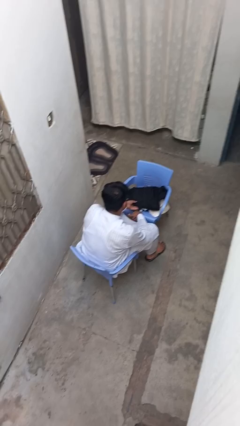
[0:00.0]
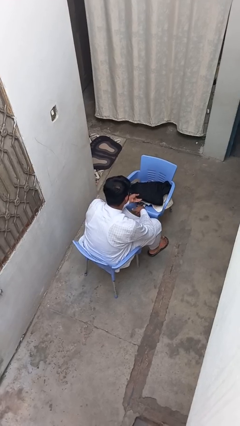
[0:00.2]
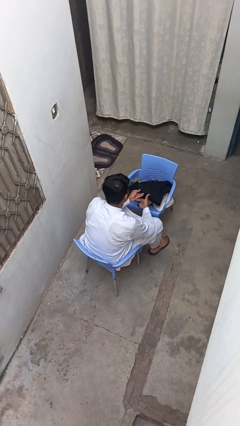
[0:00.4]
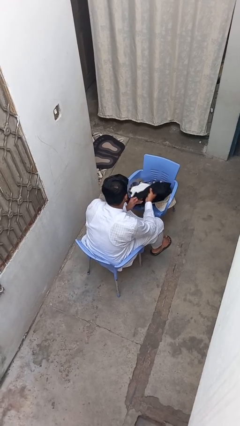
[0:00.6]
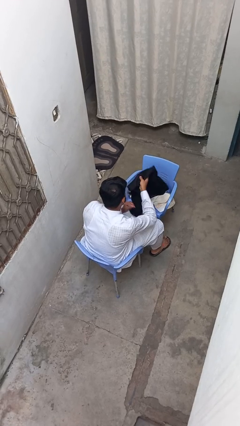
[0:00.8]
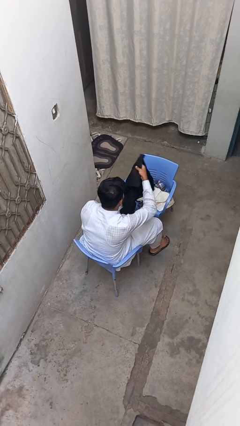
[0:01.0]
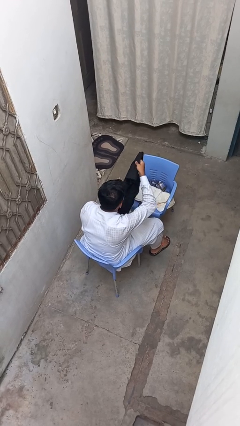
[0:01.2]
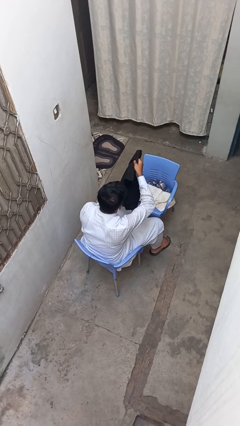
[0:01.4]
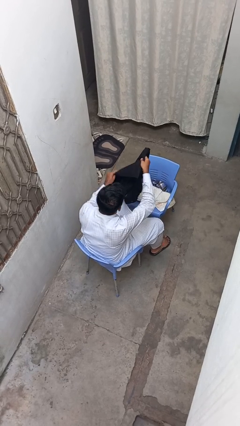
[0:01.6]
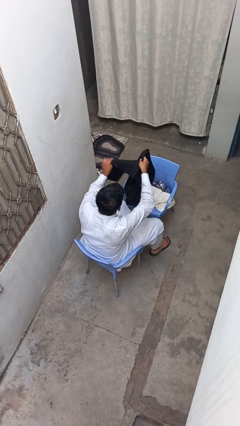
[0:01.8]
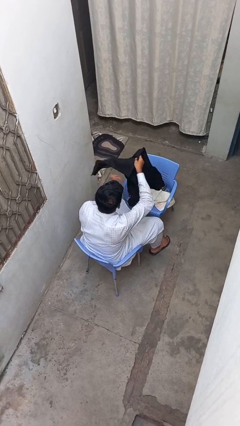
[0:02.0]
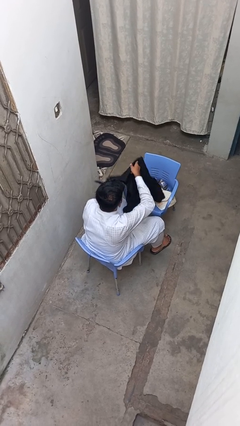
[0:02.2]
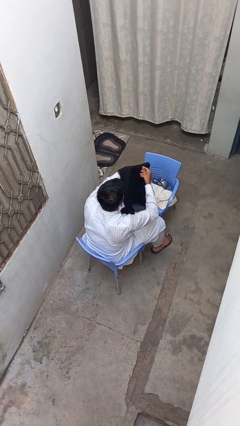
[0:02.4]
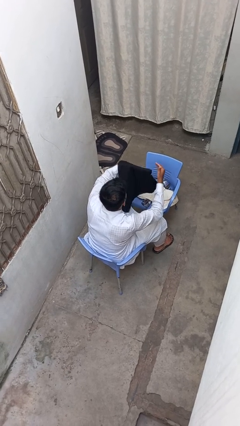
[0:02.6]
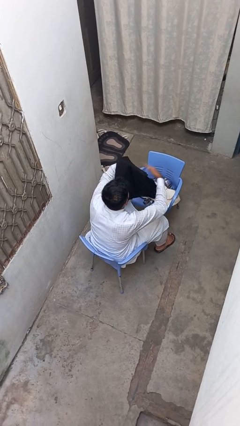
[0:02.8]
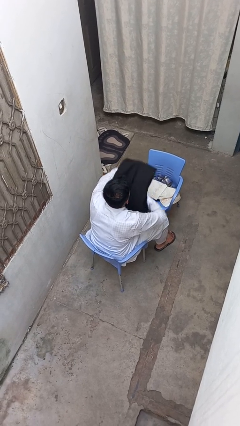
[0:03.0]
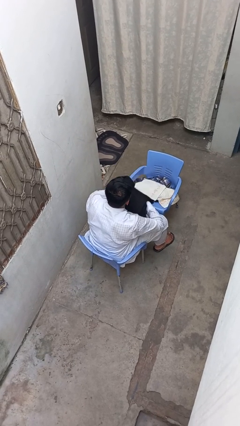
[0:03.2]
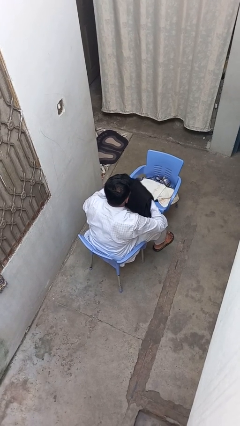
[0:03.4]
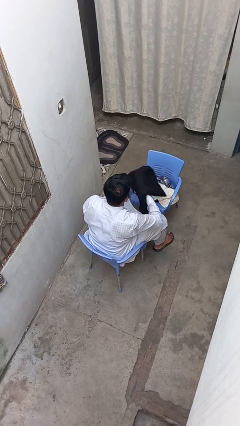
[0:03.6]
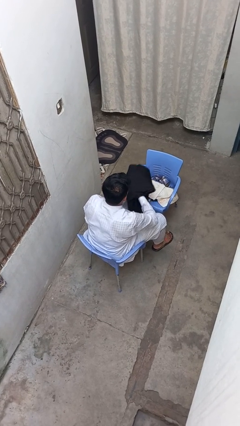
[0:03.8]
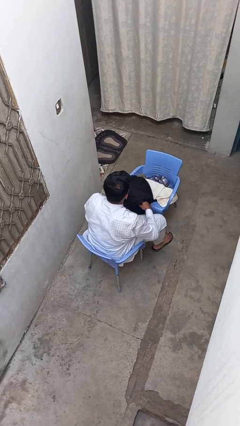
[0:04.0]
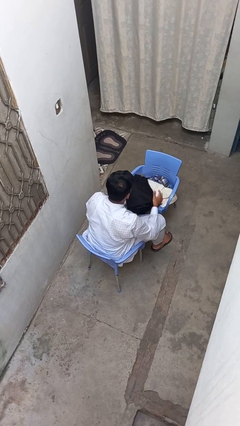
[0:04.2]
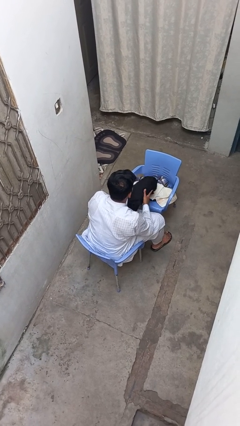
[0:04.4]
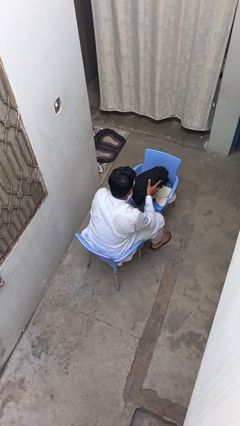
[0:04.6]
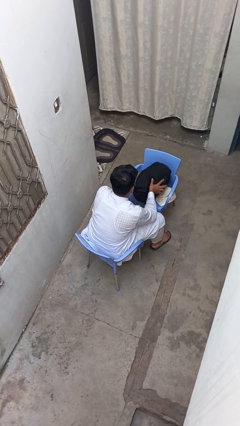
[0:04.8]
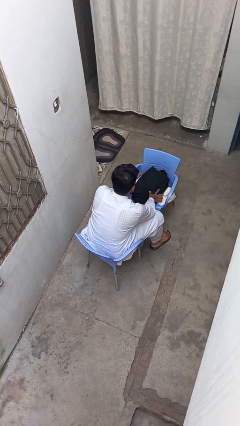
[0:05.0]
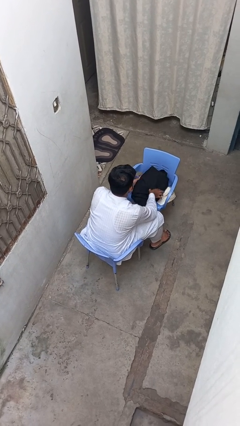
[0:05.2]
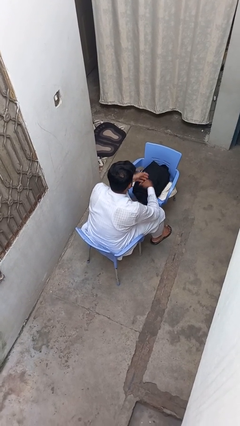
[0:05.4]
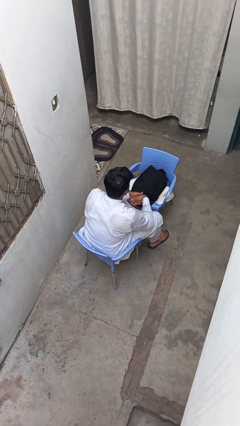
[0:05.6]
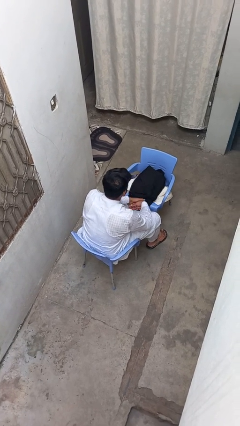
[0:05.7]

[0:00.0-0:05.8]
person folds pants

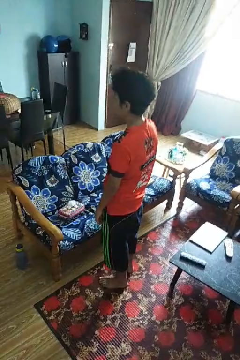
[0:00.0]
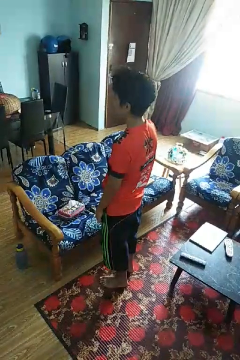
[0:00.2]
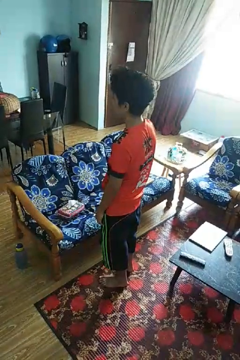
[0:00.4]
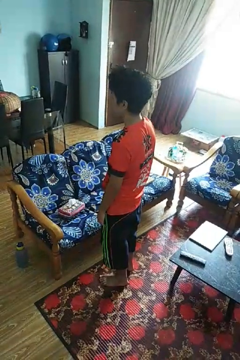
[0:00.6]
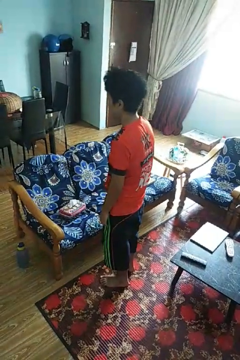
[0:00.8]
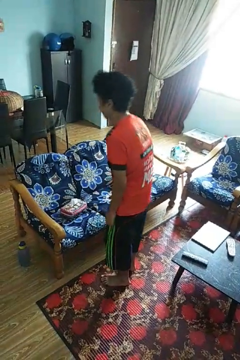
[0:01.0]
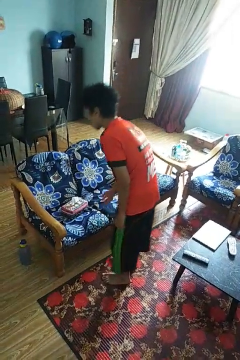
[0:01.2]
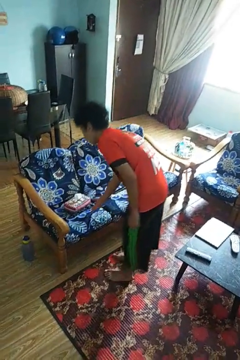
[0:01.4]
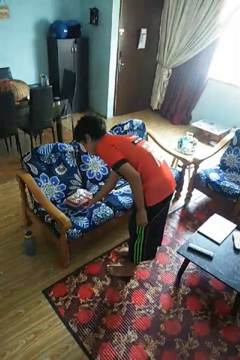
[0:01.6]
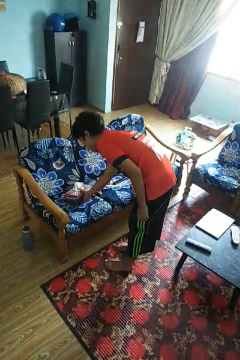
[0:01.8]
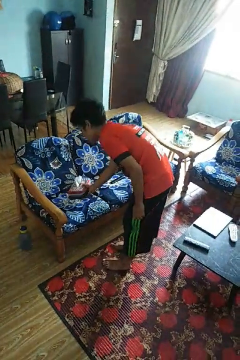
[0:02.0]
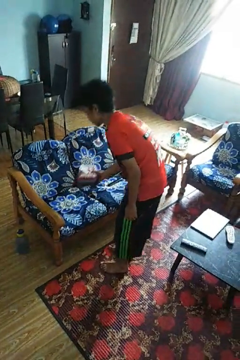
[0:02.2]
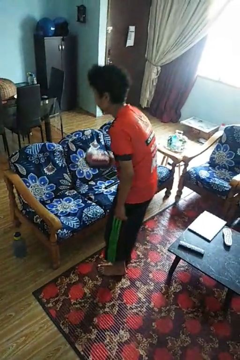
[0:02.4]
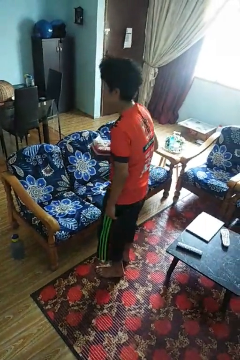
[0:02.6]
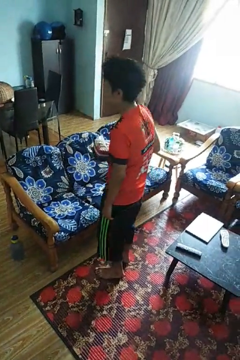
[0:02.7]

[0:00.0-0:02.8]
person picks up object from couch

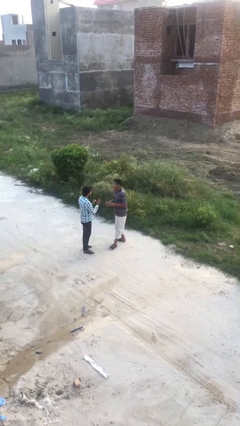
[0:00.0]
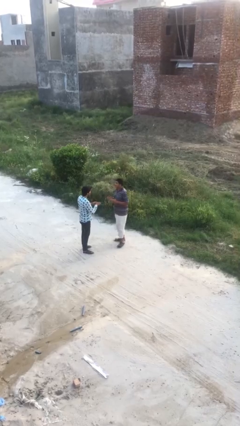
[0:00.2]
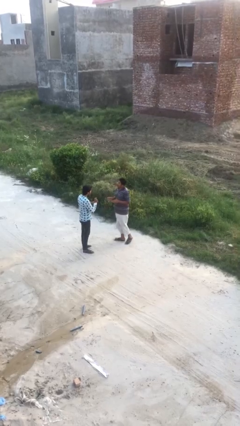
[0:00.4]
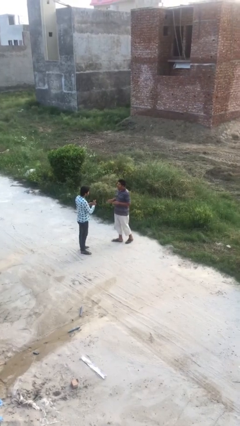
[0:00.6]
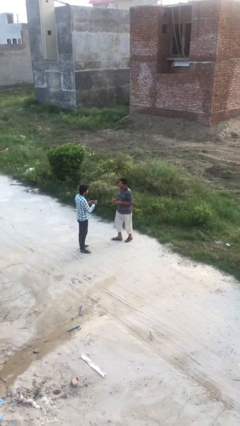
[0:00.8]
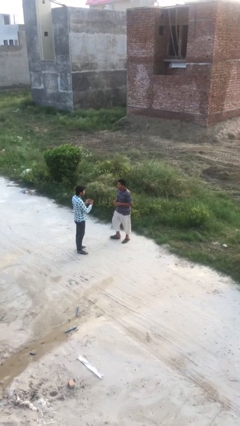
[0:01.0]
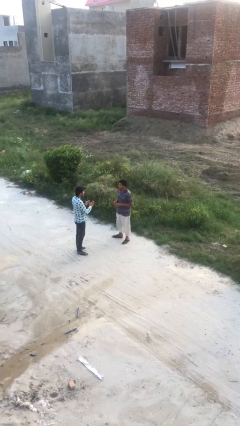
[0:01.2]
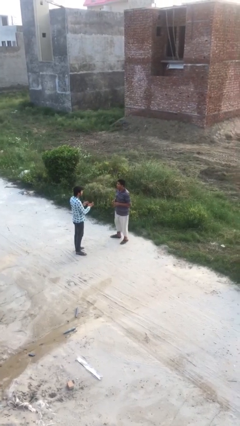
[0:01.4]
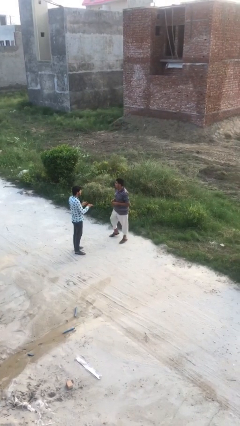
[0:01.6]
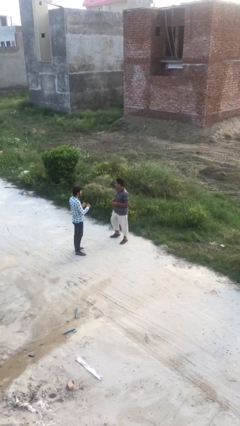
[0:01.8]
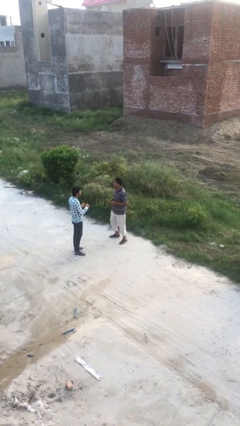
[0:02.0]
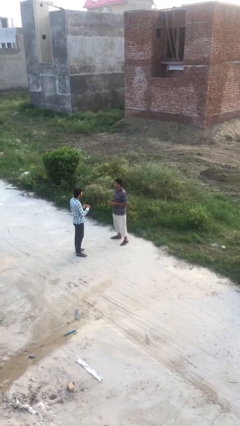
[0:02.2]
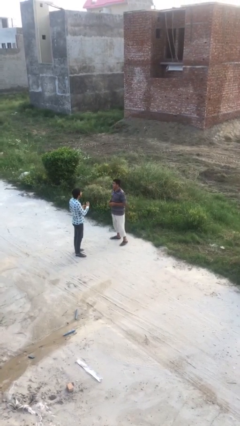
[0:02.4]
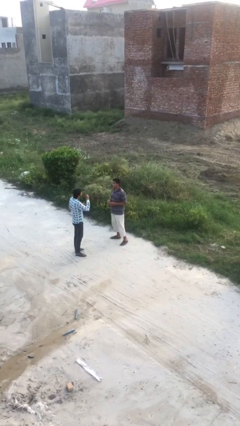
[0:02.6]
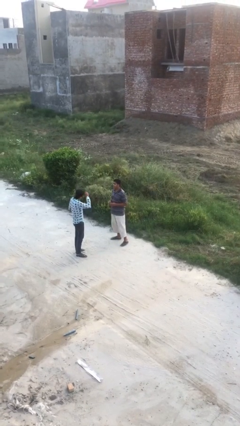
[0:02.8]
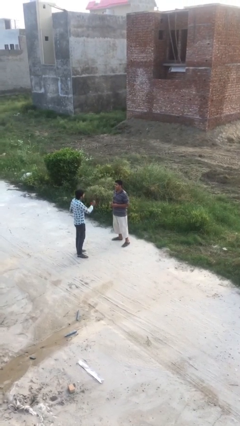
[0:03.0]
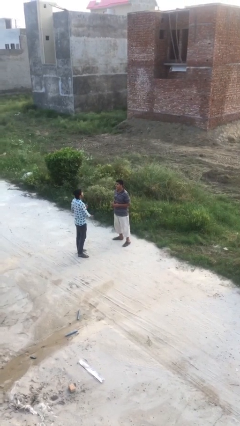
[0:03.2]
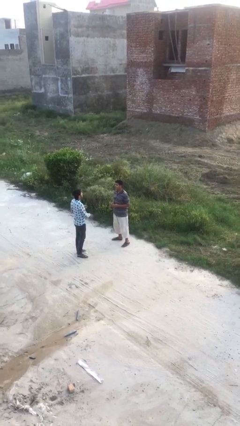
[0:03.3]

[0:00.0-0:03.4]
person talks to person

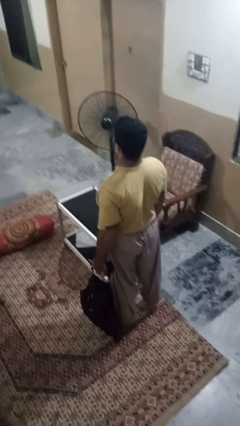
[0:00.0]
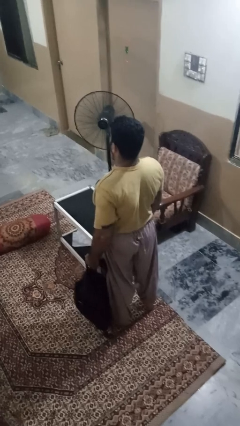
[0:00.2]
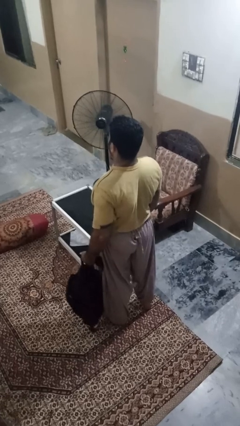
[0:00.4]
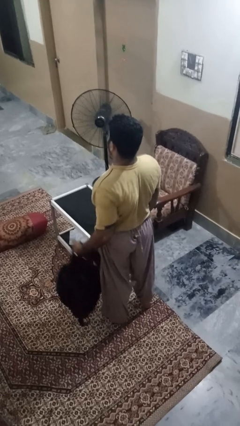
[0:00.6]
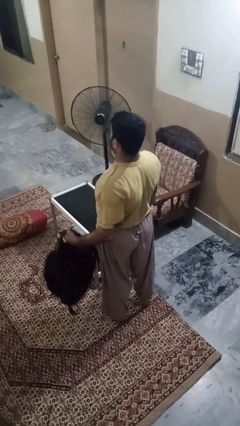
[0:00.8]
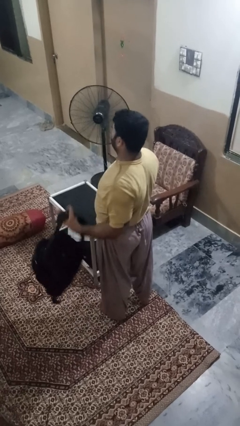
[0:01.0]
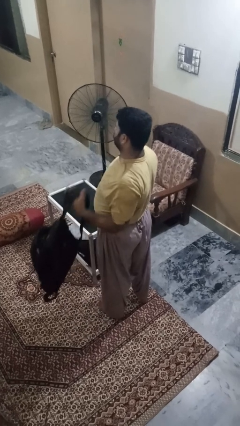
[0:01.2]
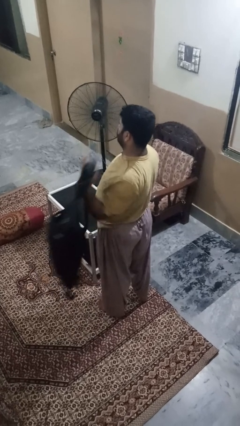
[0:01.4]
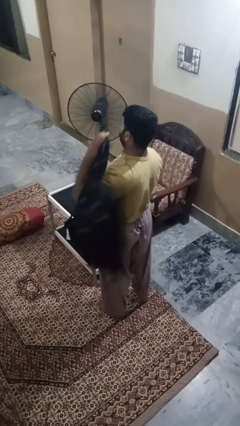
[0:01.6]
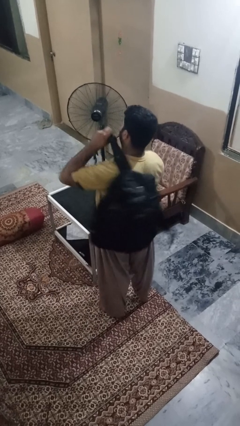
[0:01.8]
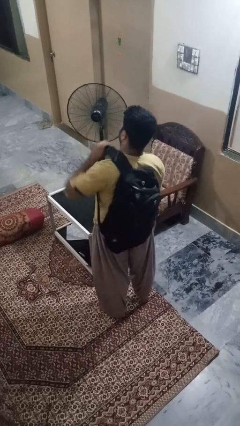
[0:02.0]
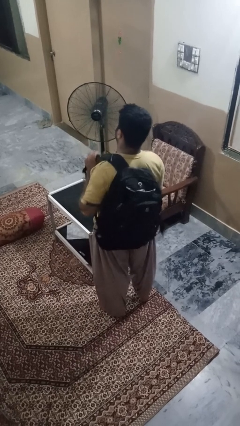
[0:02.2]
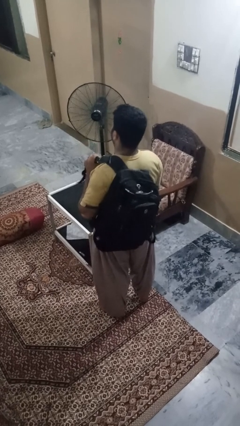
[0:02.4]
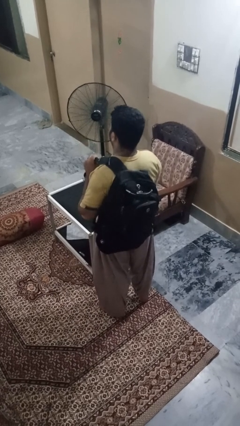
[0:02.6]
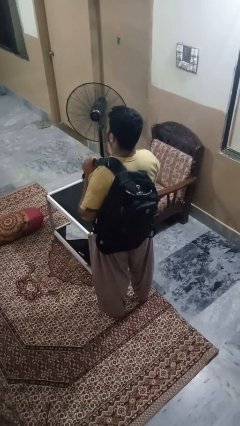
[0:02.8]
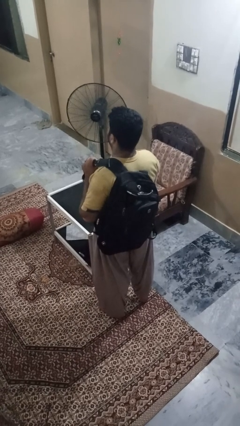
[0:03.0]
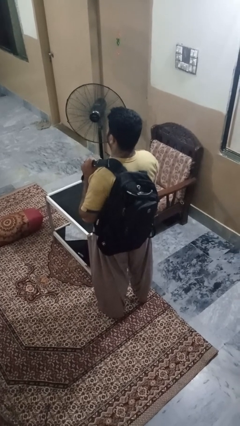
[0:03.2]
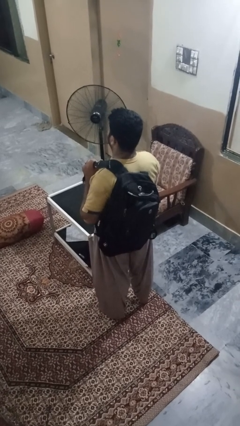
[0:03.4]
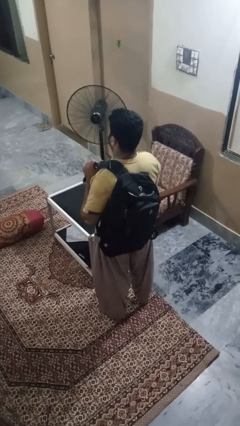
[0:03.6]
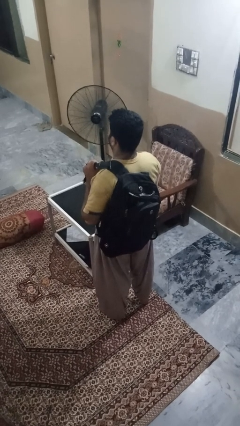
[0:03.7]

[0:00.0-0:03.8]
person puts on backpack

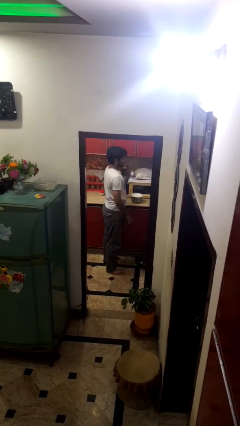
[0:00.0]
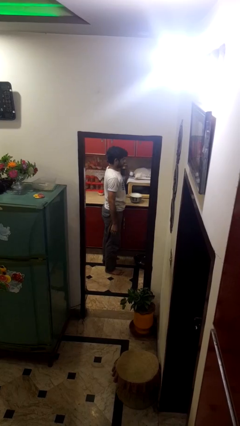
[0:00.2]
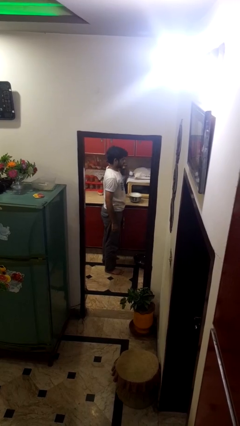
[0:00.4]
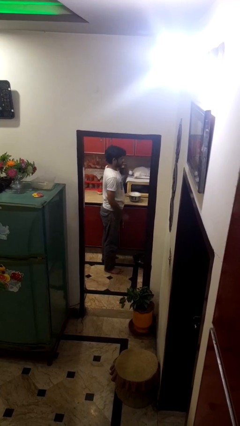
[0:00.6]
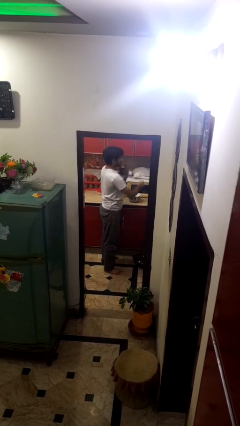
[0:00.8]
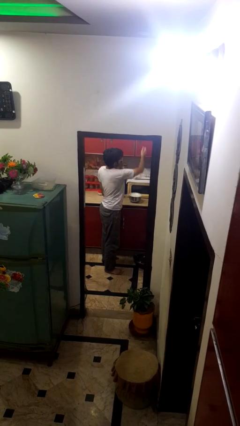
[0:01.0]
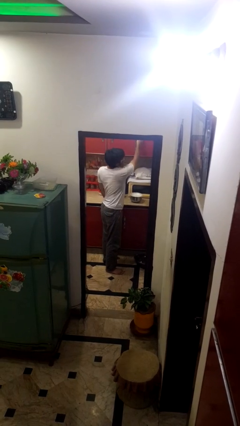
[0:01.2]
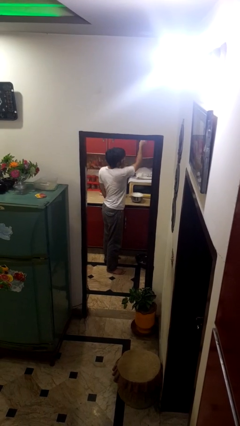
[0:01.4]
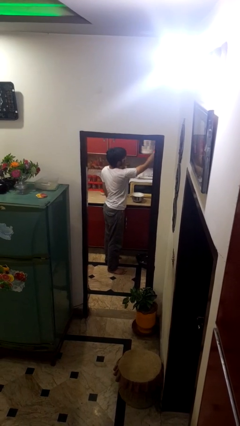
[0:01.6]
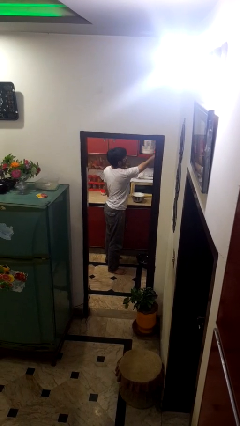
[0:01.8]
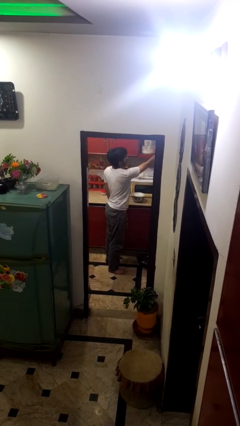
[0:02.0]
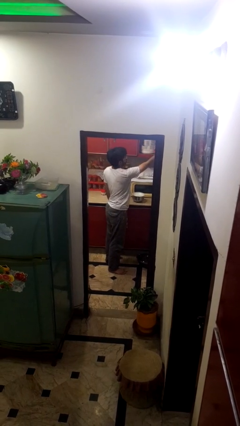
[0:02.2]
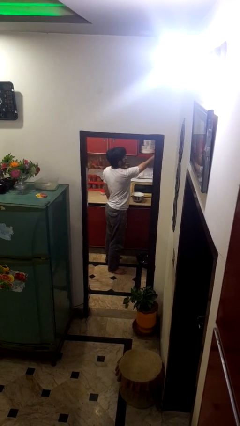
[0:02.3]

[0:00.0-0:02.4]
person opens cabinet
